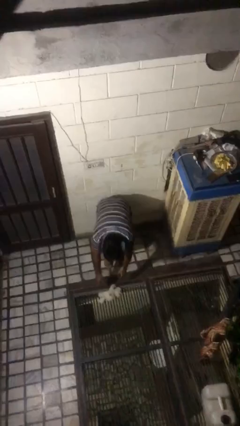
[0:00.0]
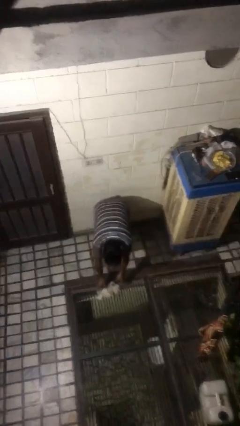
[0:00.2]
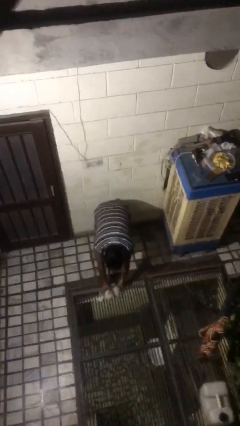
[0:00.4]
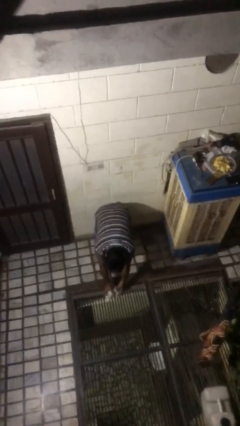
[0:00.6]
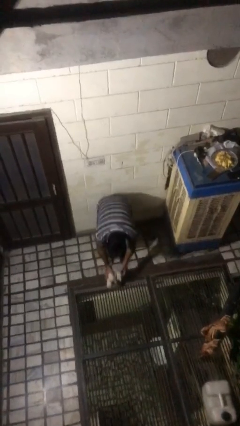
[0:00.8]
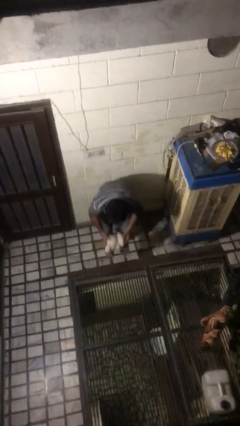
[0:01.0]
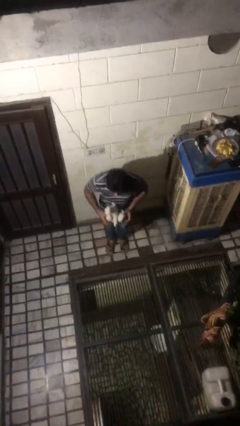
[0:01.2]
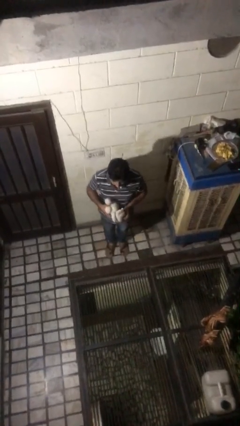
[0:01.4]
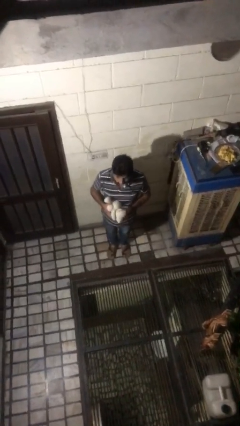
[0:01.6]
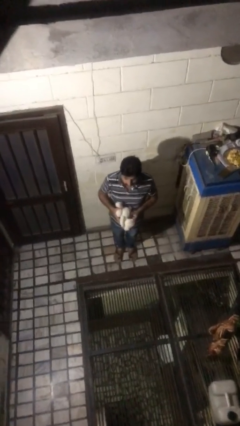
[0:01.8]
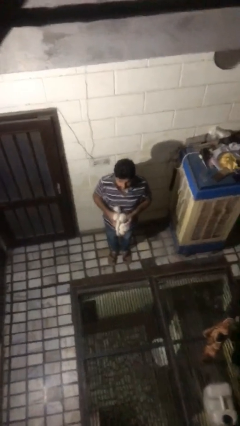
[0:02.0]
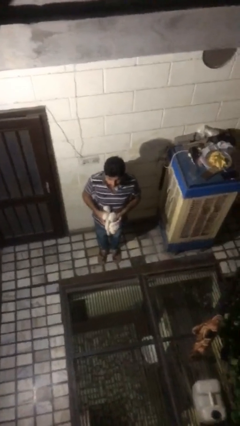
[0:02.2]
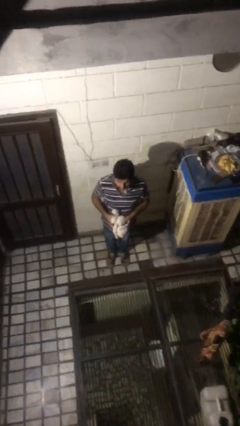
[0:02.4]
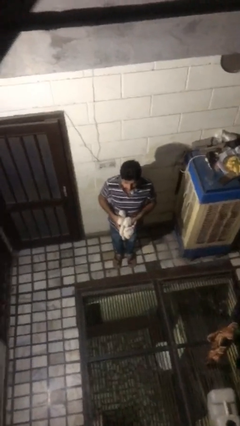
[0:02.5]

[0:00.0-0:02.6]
person picks up object from floor

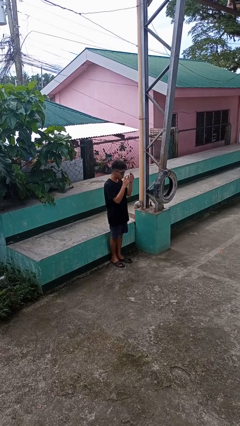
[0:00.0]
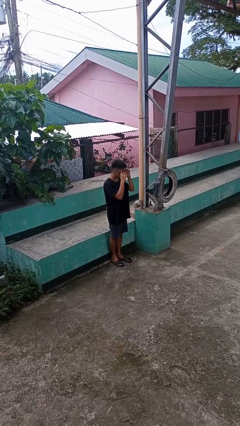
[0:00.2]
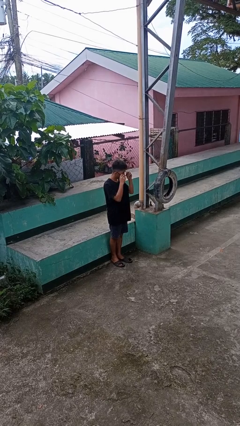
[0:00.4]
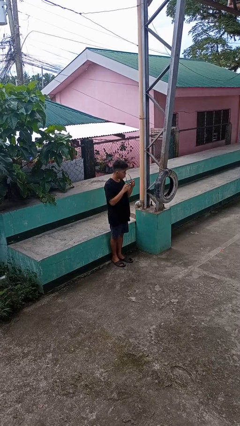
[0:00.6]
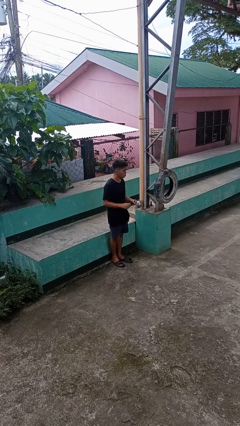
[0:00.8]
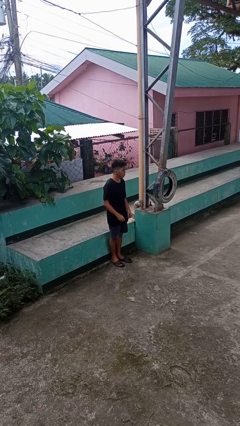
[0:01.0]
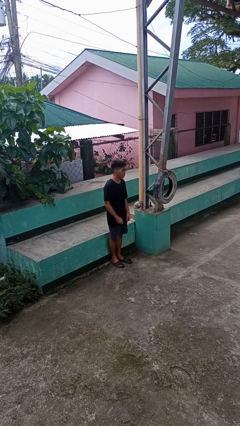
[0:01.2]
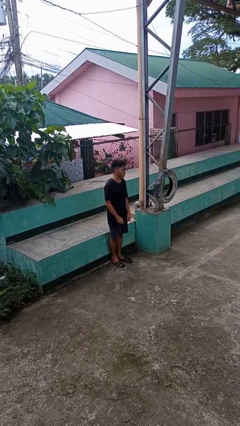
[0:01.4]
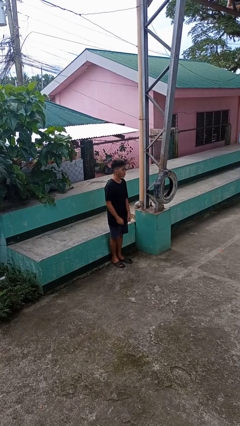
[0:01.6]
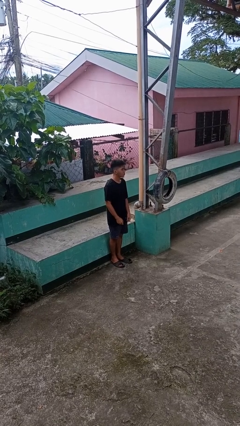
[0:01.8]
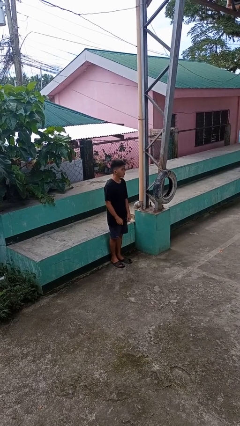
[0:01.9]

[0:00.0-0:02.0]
person takes off sunglasses

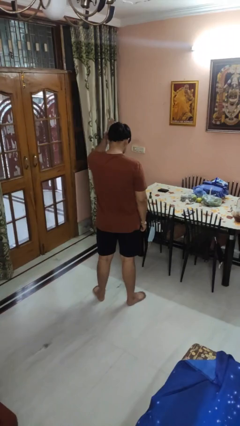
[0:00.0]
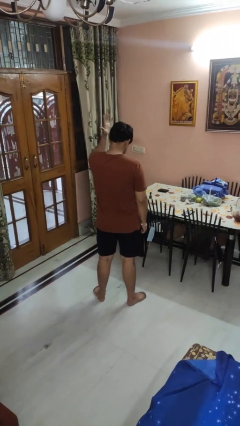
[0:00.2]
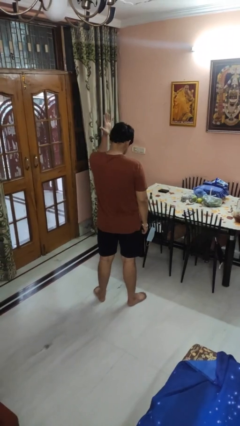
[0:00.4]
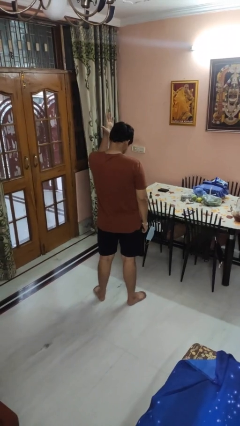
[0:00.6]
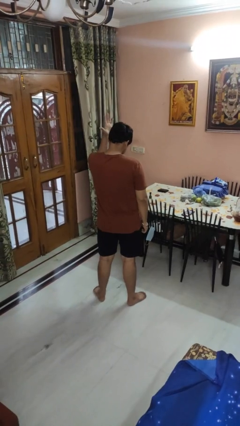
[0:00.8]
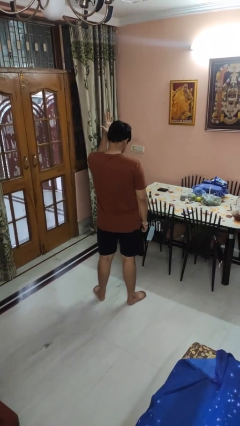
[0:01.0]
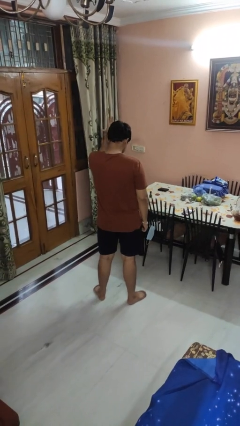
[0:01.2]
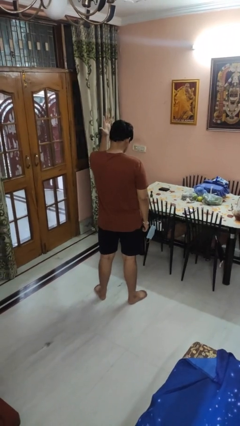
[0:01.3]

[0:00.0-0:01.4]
person pats head

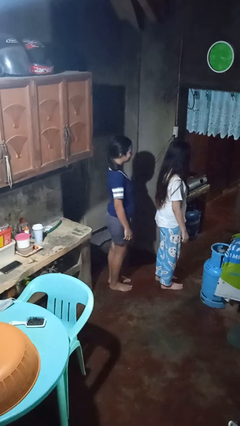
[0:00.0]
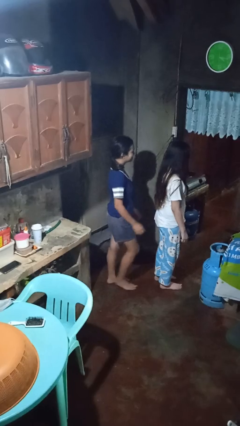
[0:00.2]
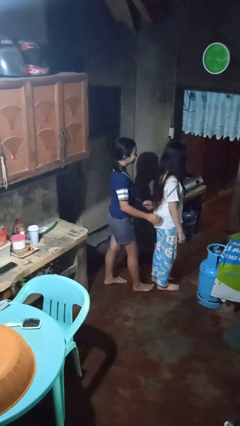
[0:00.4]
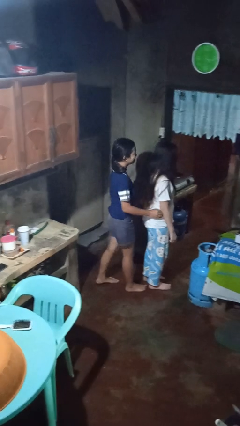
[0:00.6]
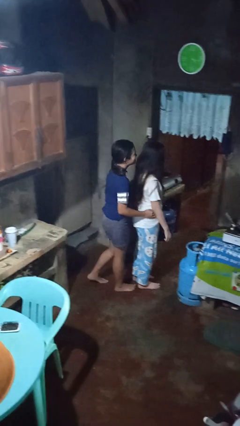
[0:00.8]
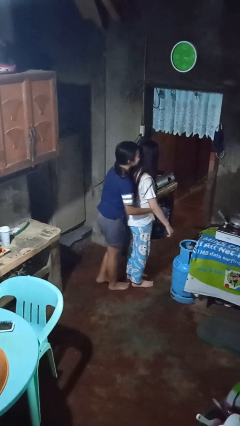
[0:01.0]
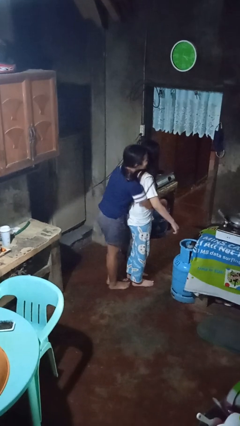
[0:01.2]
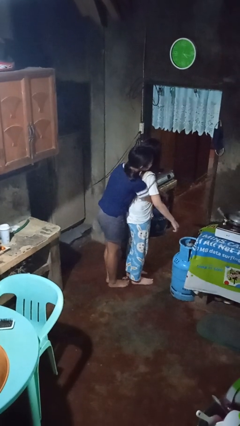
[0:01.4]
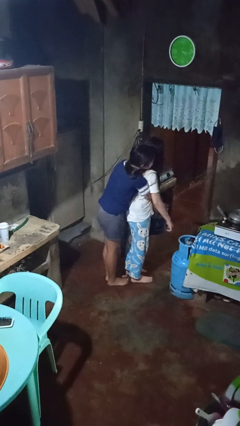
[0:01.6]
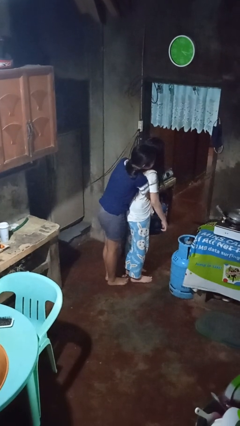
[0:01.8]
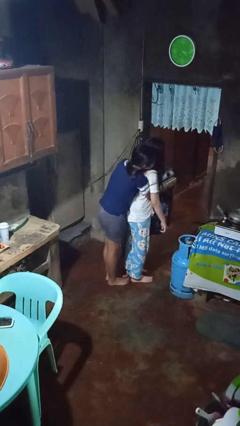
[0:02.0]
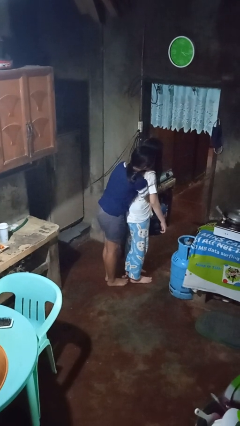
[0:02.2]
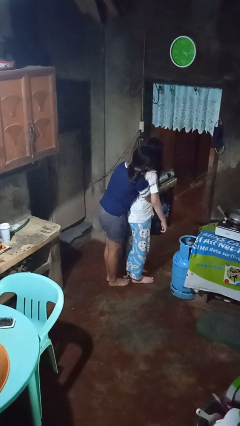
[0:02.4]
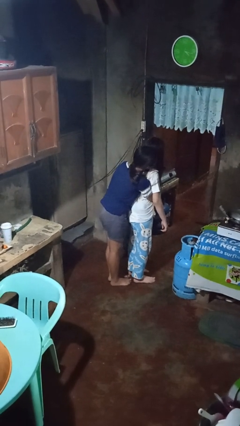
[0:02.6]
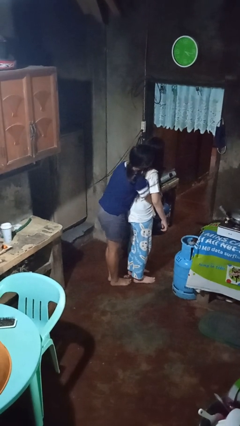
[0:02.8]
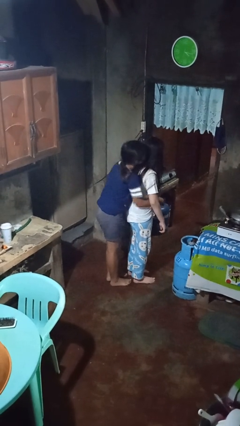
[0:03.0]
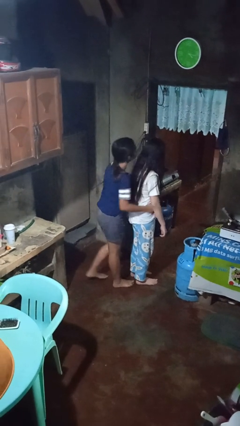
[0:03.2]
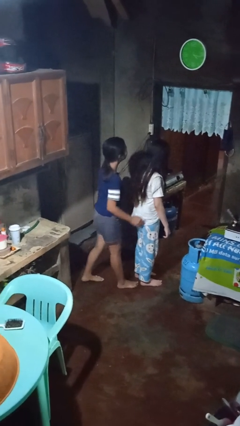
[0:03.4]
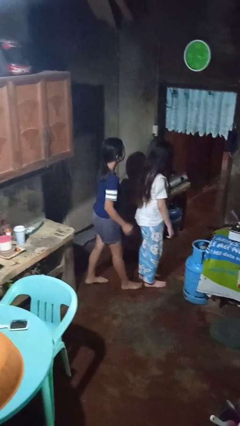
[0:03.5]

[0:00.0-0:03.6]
person hugs person from behind

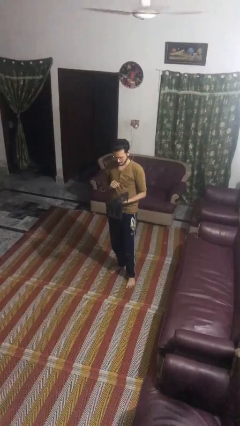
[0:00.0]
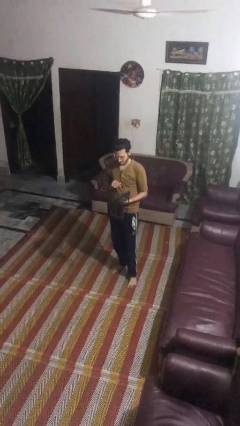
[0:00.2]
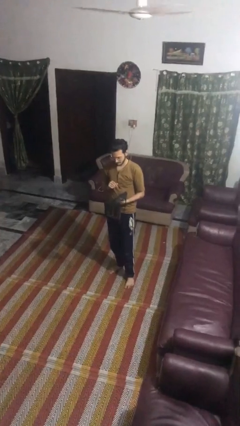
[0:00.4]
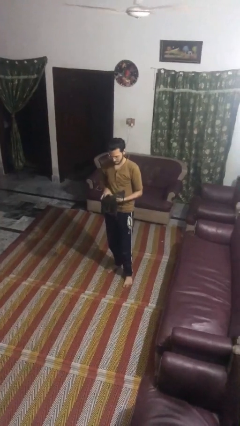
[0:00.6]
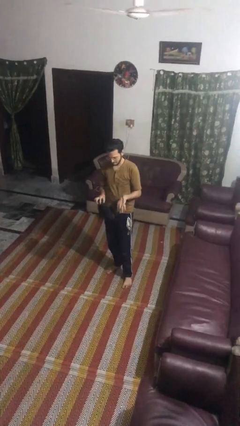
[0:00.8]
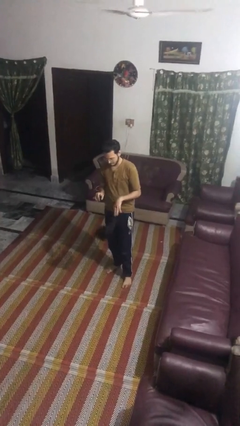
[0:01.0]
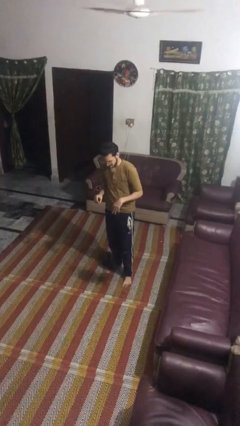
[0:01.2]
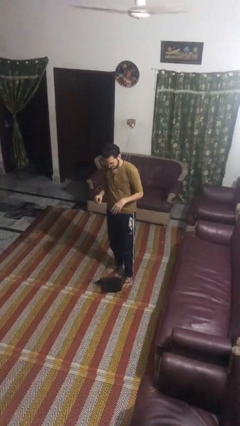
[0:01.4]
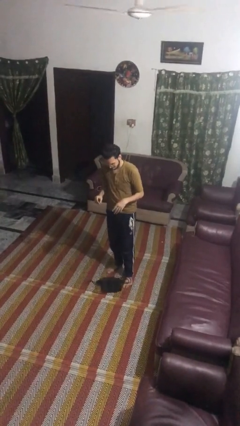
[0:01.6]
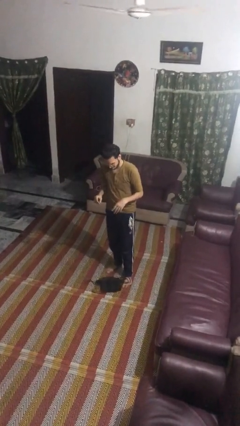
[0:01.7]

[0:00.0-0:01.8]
person drops object

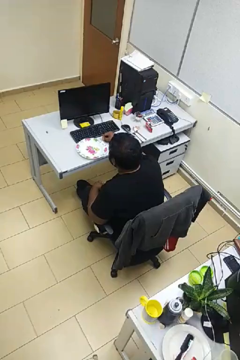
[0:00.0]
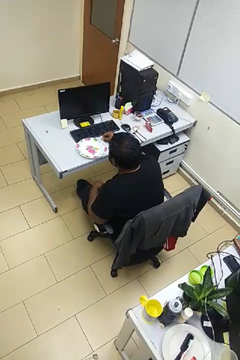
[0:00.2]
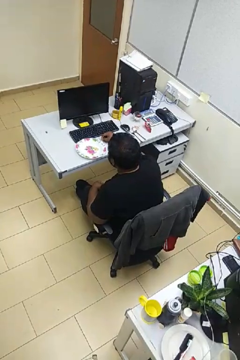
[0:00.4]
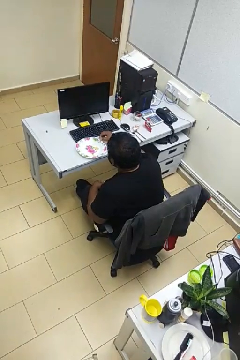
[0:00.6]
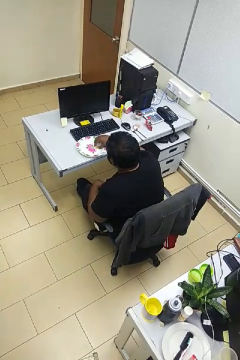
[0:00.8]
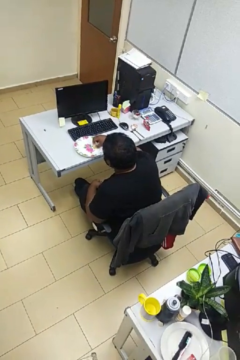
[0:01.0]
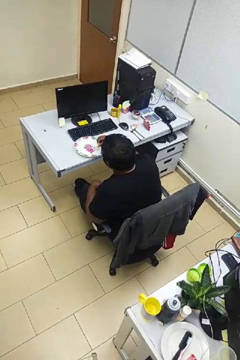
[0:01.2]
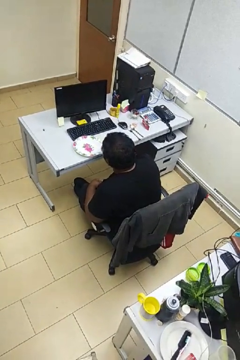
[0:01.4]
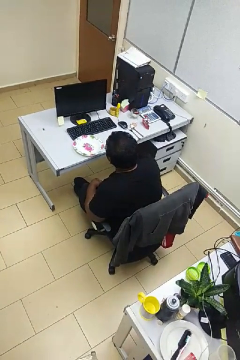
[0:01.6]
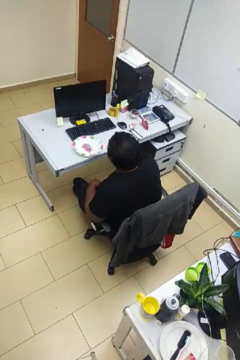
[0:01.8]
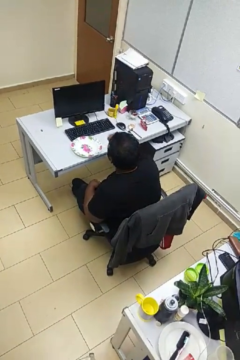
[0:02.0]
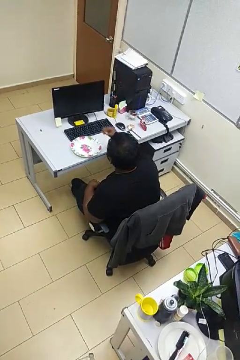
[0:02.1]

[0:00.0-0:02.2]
person eats with hands

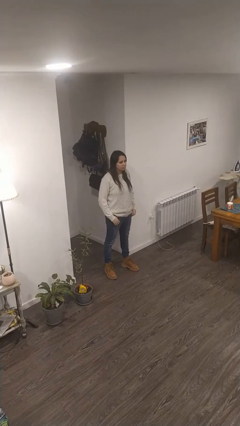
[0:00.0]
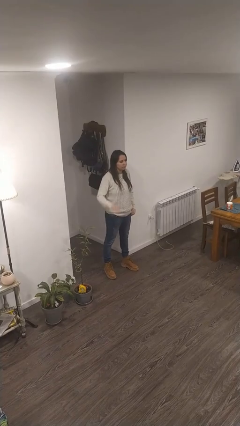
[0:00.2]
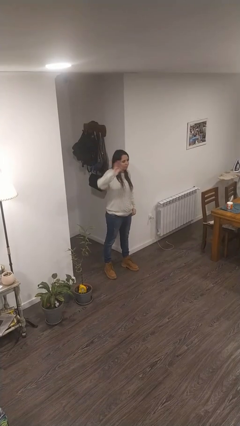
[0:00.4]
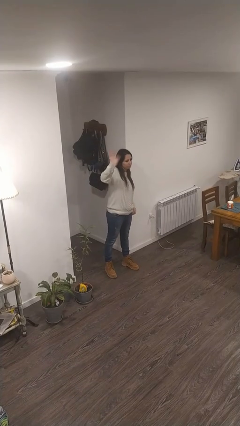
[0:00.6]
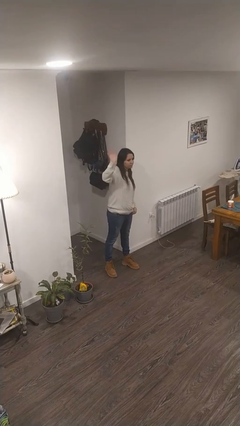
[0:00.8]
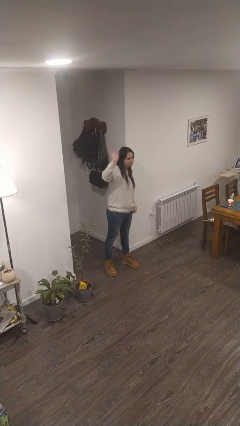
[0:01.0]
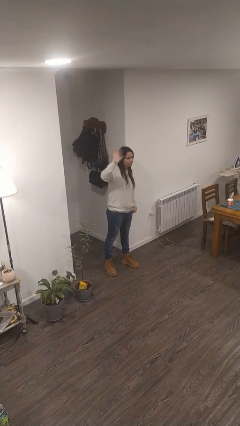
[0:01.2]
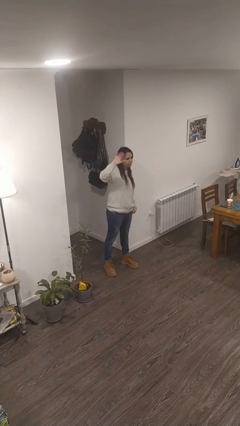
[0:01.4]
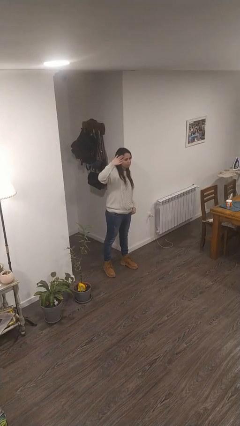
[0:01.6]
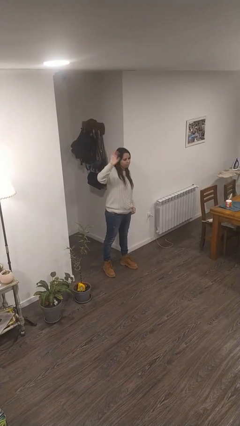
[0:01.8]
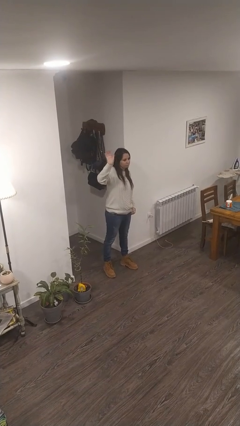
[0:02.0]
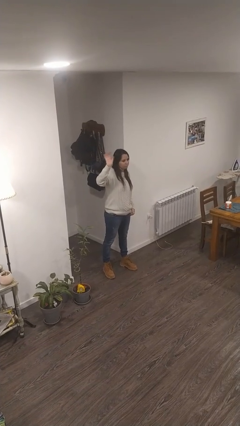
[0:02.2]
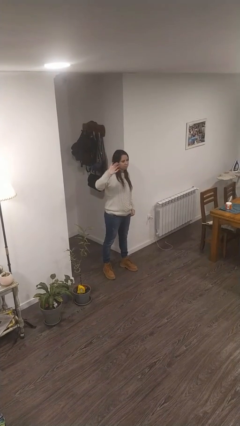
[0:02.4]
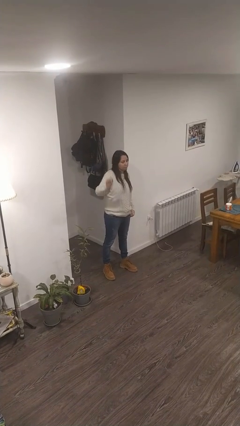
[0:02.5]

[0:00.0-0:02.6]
person waves at person

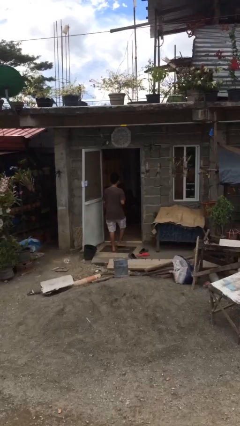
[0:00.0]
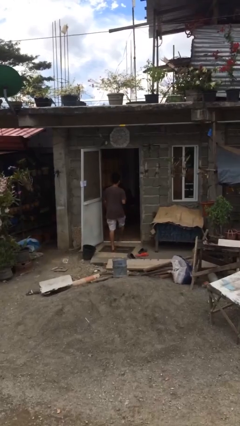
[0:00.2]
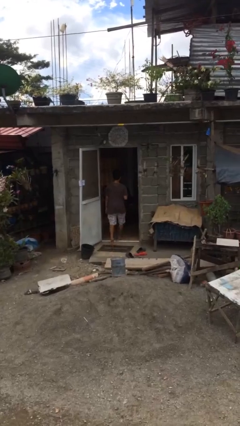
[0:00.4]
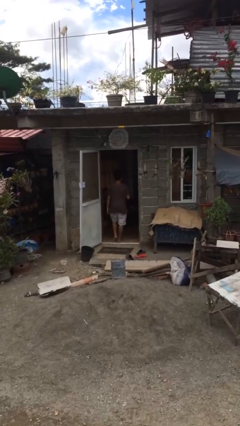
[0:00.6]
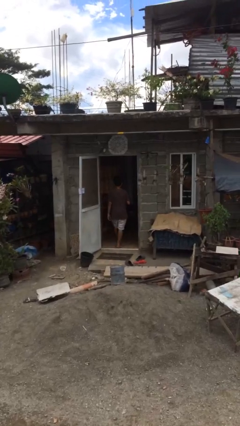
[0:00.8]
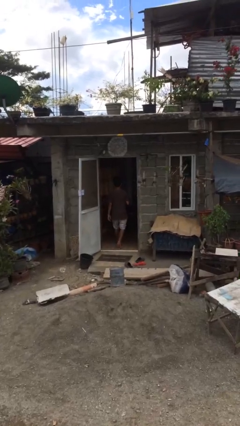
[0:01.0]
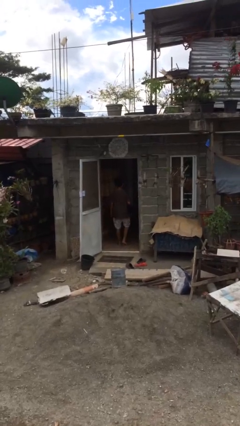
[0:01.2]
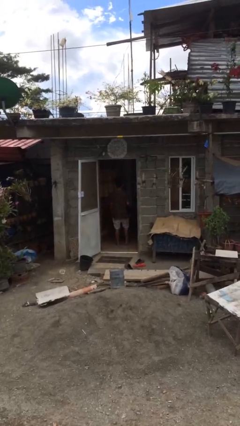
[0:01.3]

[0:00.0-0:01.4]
person exits scene through structure
